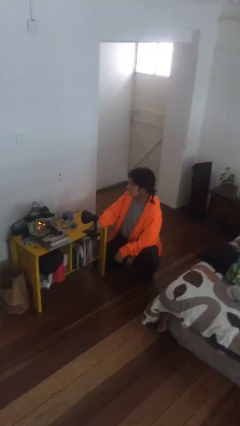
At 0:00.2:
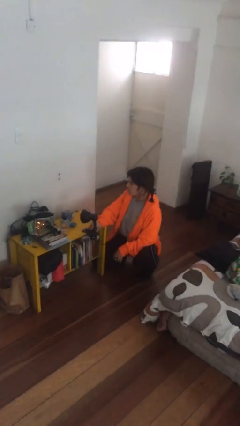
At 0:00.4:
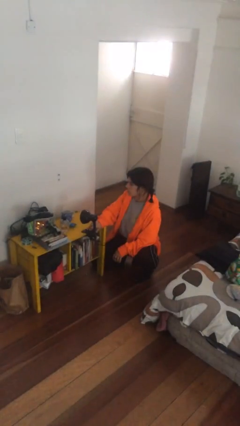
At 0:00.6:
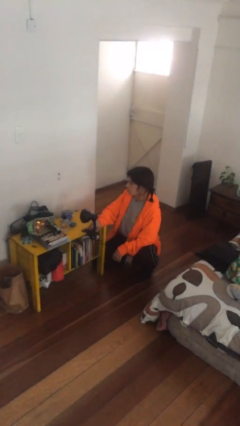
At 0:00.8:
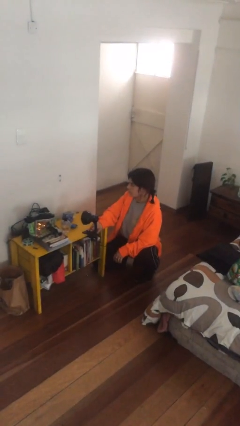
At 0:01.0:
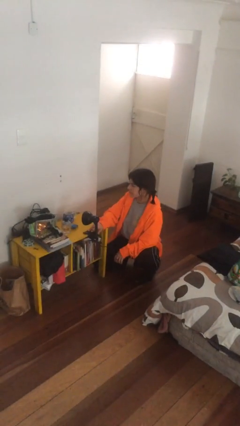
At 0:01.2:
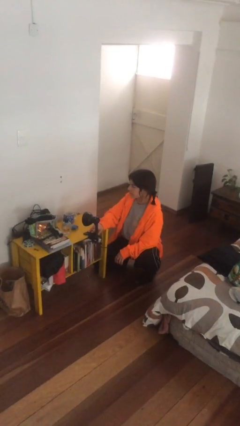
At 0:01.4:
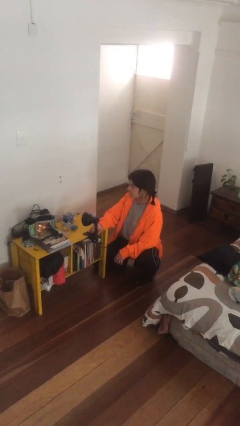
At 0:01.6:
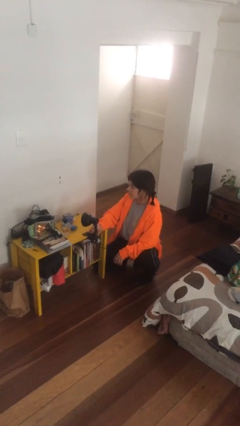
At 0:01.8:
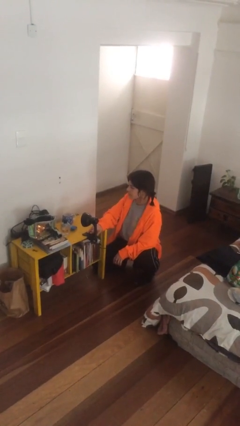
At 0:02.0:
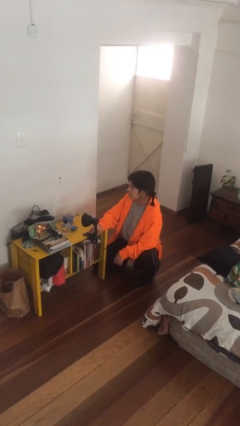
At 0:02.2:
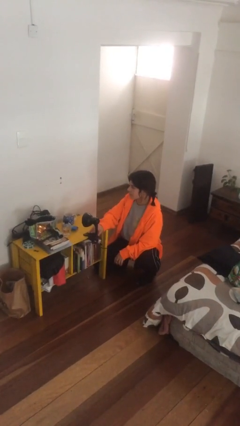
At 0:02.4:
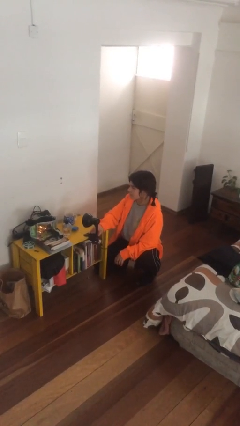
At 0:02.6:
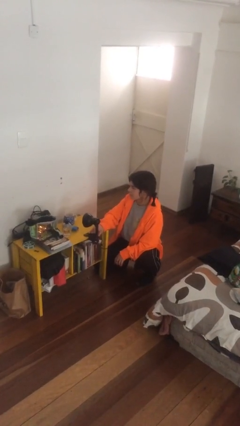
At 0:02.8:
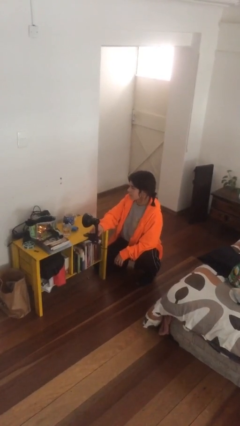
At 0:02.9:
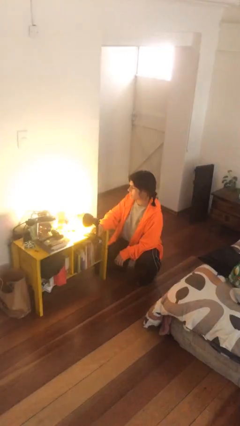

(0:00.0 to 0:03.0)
person turns off lamp

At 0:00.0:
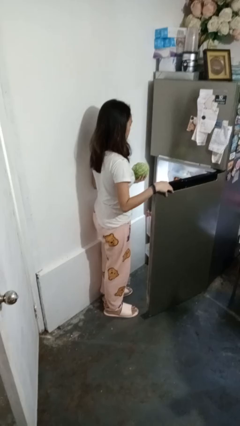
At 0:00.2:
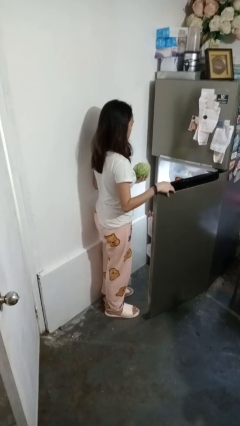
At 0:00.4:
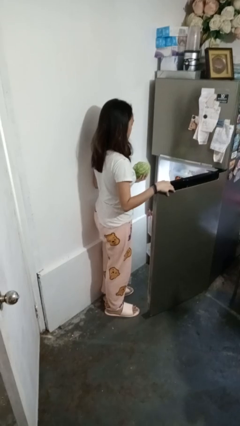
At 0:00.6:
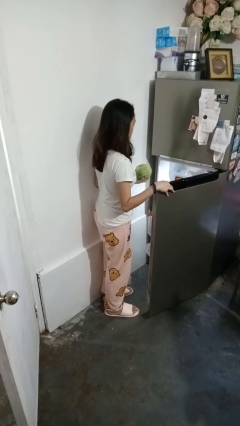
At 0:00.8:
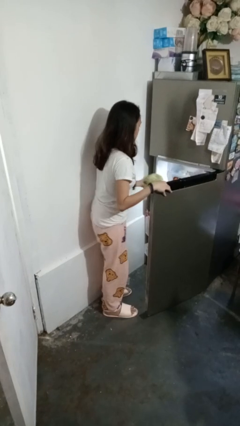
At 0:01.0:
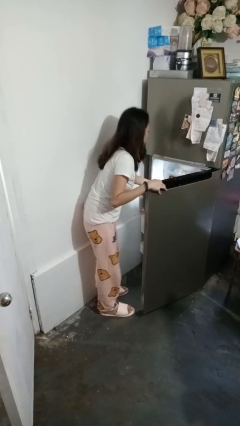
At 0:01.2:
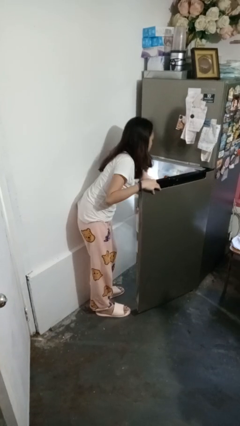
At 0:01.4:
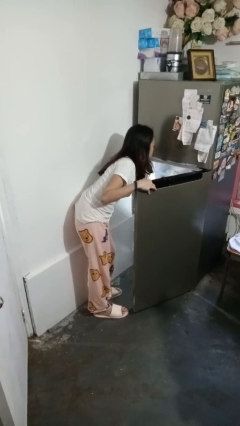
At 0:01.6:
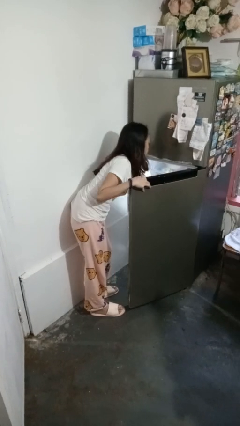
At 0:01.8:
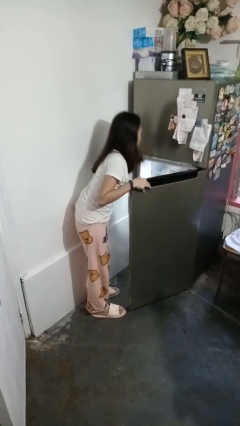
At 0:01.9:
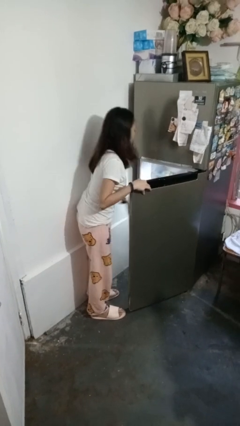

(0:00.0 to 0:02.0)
person puts object into refrigerator

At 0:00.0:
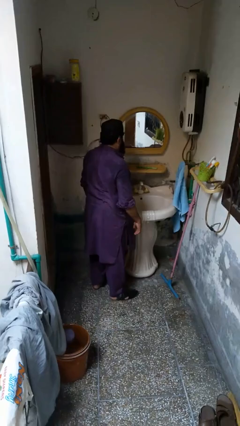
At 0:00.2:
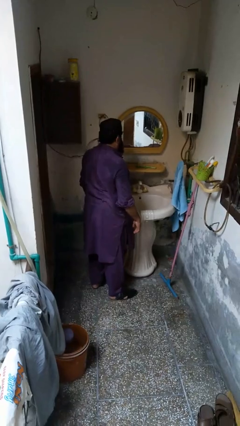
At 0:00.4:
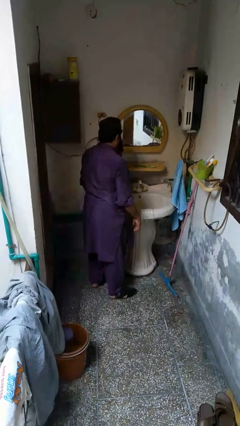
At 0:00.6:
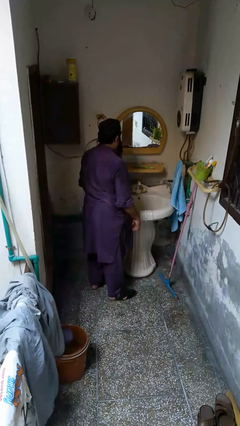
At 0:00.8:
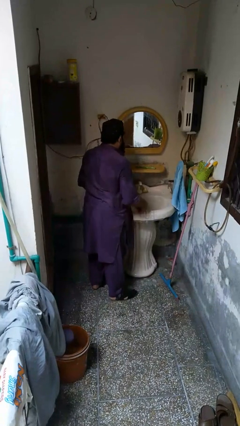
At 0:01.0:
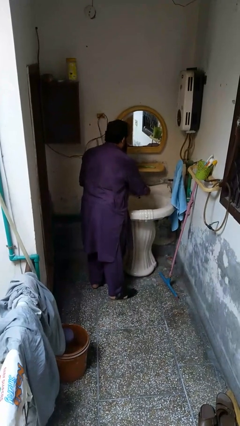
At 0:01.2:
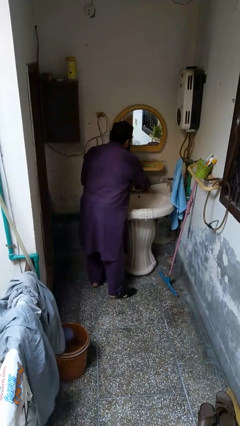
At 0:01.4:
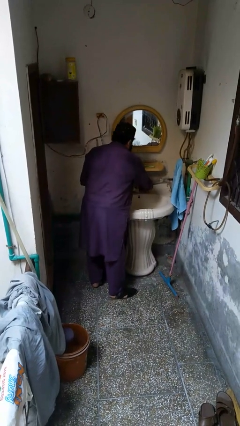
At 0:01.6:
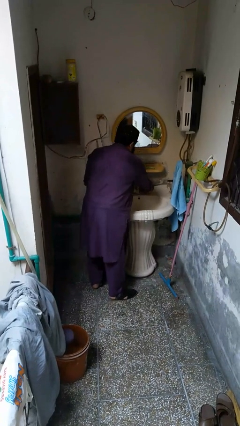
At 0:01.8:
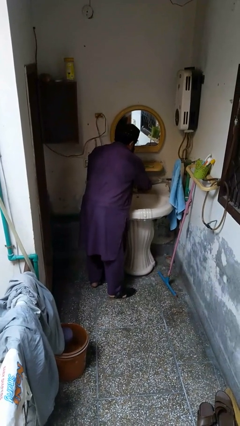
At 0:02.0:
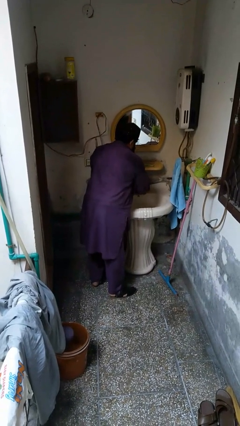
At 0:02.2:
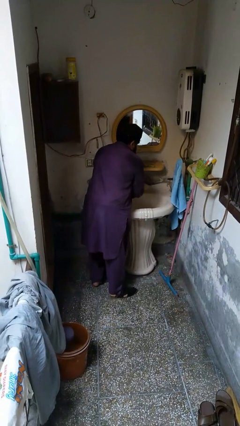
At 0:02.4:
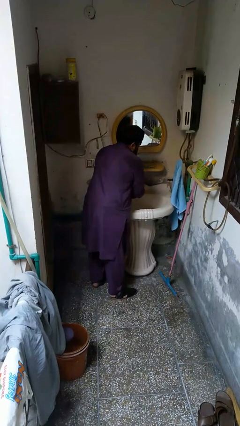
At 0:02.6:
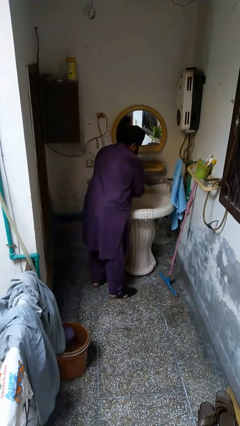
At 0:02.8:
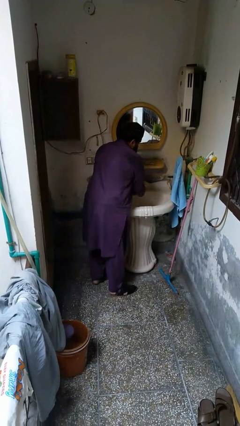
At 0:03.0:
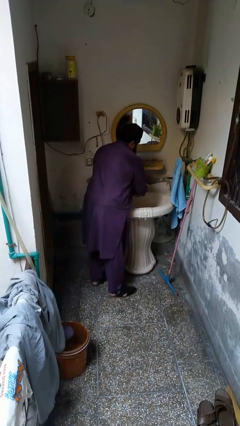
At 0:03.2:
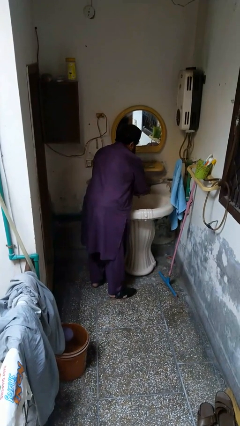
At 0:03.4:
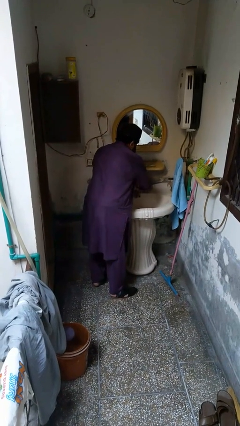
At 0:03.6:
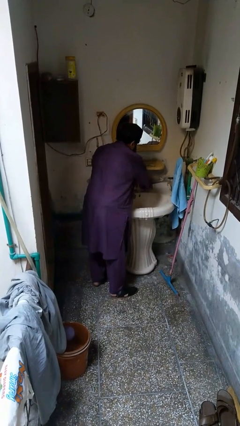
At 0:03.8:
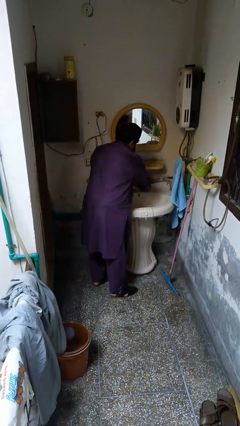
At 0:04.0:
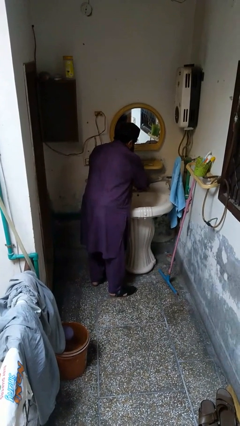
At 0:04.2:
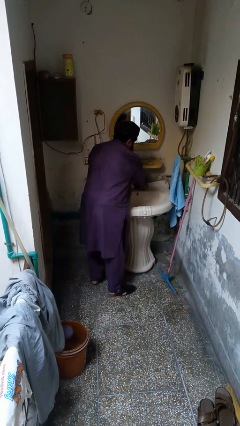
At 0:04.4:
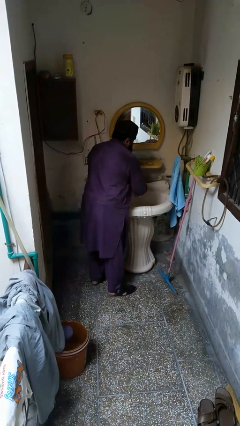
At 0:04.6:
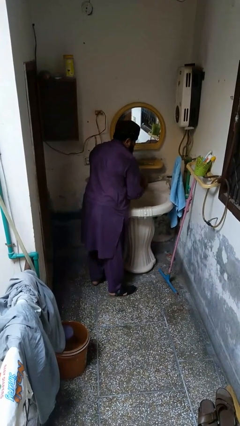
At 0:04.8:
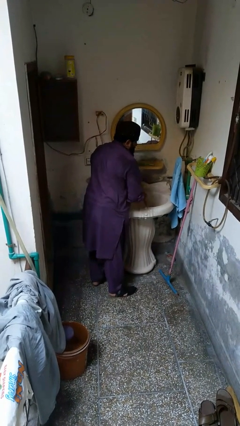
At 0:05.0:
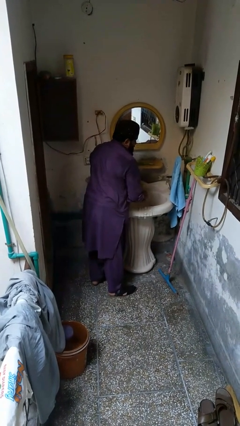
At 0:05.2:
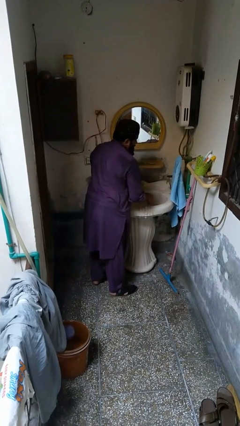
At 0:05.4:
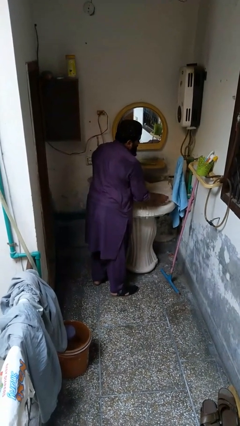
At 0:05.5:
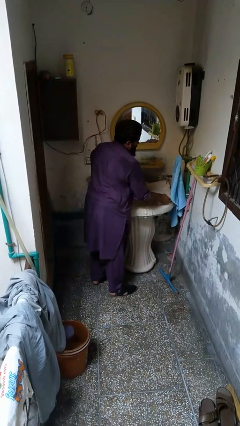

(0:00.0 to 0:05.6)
person washes hands

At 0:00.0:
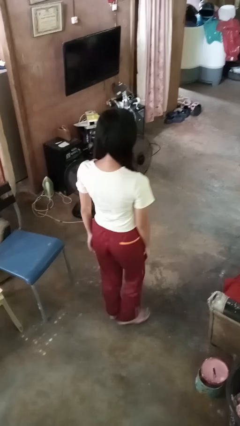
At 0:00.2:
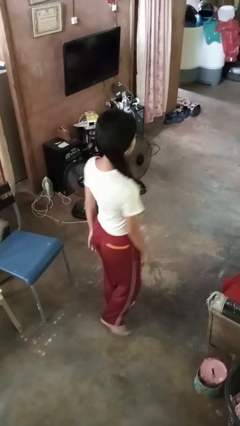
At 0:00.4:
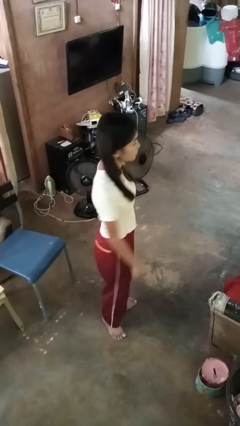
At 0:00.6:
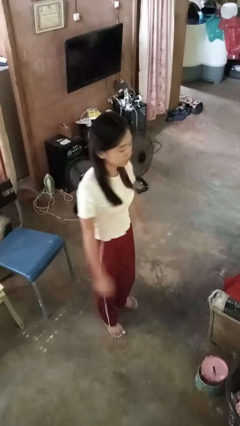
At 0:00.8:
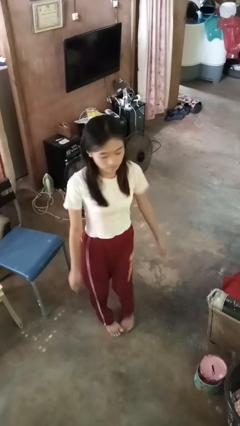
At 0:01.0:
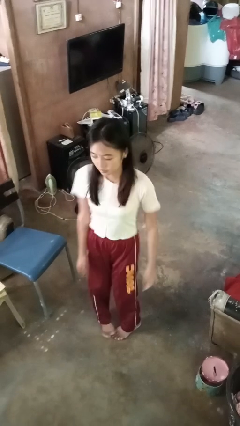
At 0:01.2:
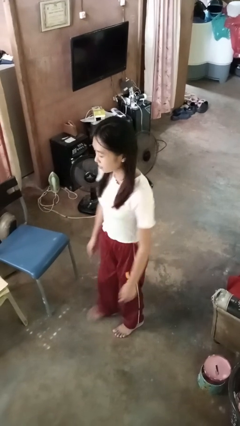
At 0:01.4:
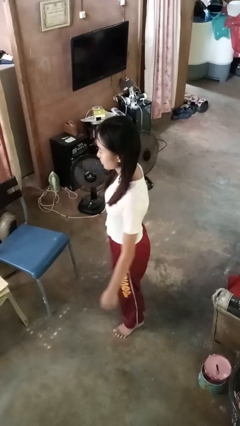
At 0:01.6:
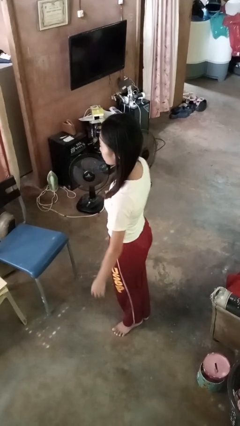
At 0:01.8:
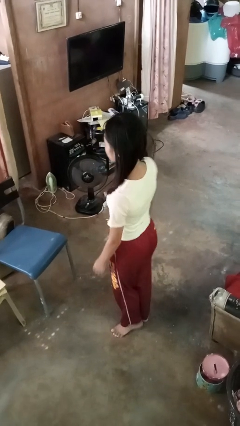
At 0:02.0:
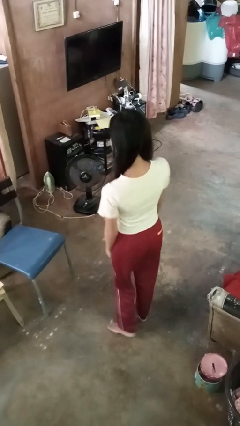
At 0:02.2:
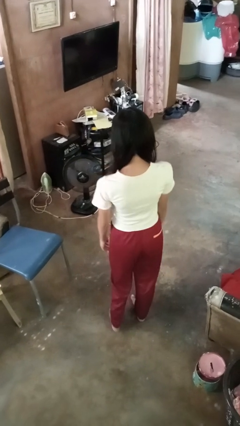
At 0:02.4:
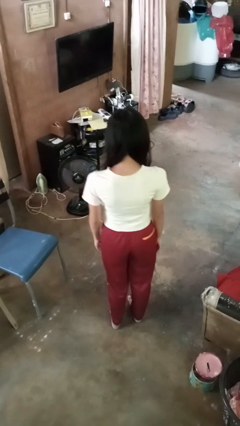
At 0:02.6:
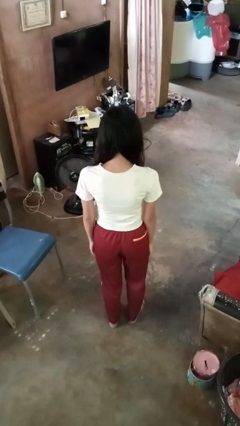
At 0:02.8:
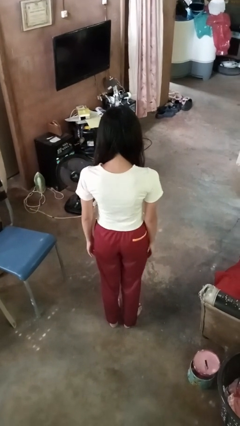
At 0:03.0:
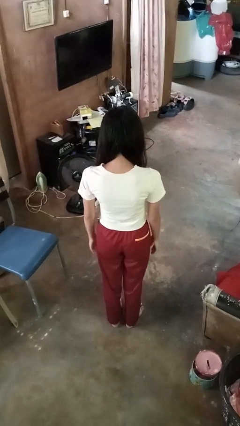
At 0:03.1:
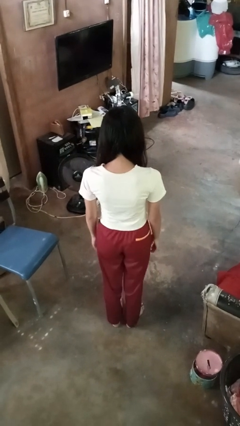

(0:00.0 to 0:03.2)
person twirls

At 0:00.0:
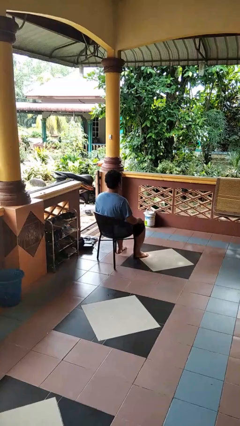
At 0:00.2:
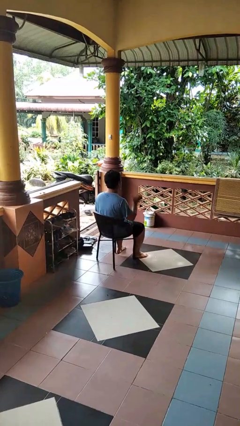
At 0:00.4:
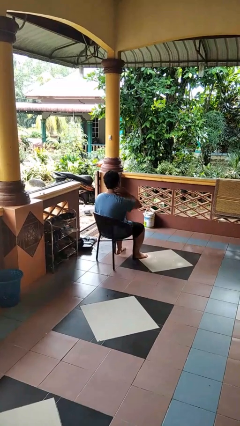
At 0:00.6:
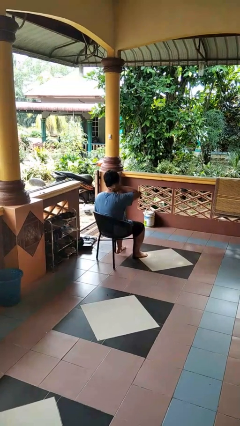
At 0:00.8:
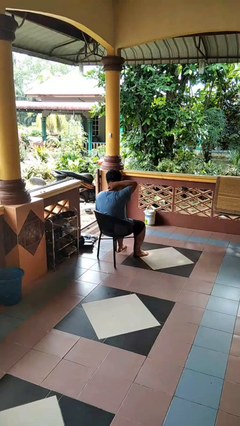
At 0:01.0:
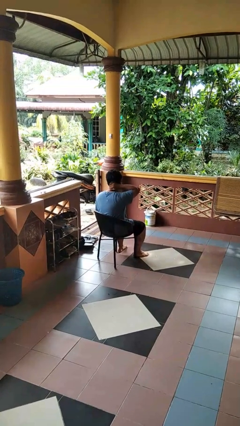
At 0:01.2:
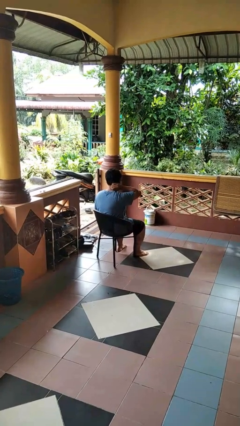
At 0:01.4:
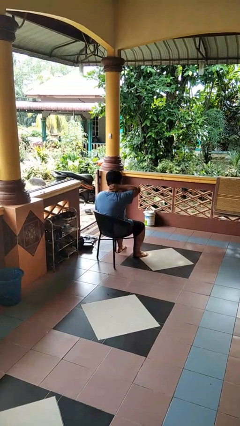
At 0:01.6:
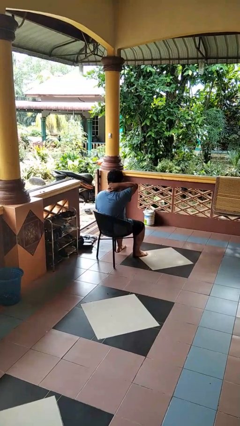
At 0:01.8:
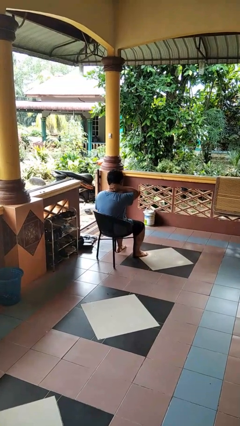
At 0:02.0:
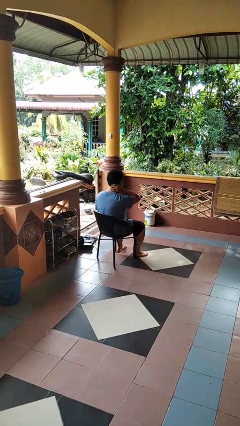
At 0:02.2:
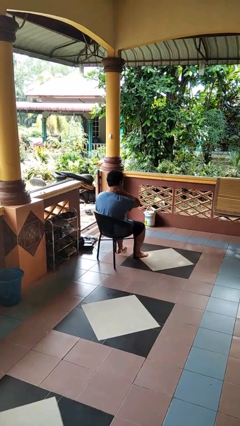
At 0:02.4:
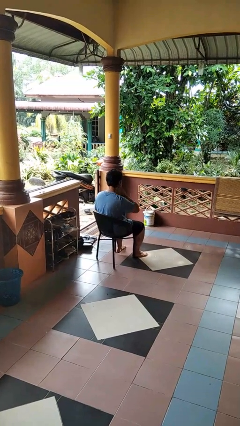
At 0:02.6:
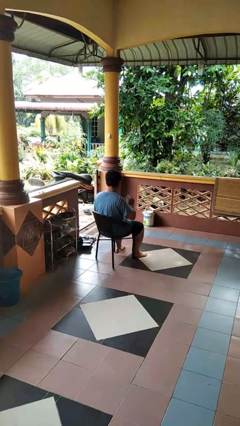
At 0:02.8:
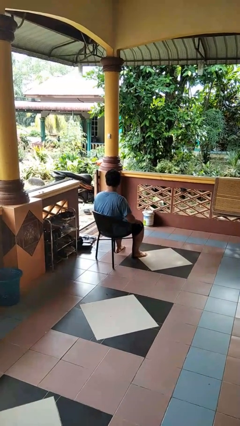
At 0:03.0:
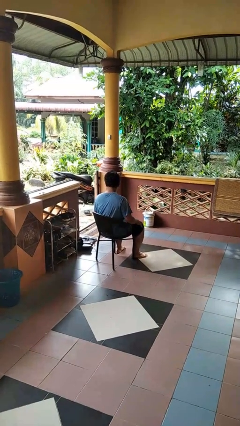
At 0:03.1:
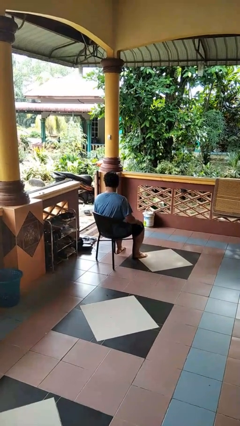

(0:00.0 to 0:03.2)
person rubs neck

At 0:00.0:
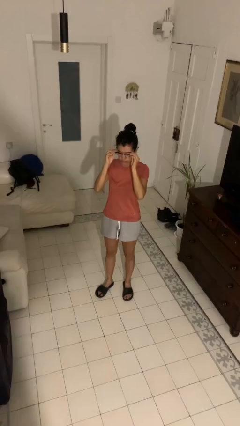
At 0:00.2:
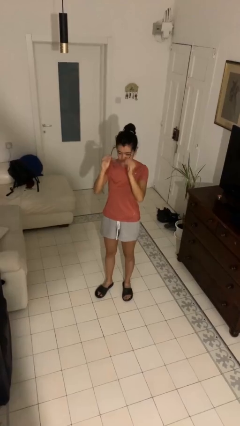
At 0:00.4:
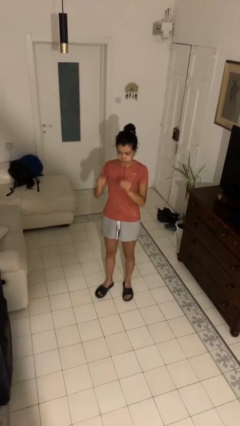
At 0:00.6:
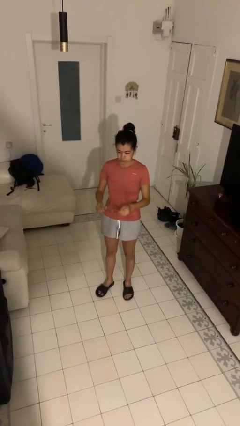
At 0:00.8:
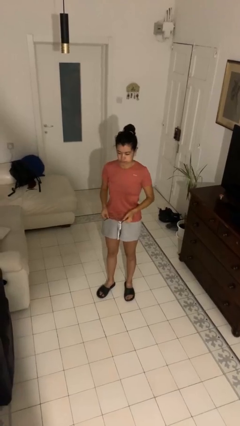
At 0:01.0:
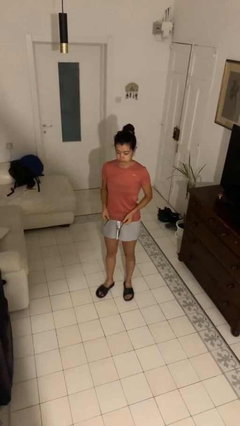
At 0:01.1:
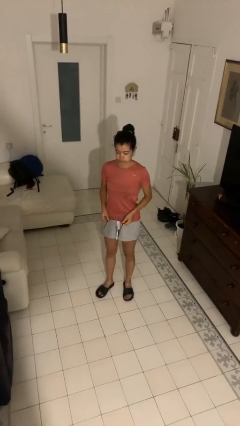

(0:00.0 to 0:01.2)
person takes off glasses
